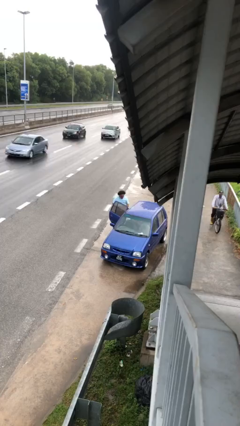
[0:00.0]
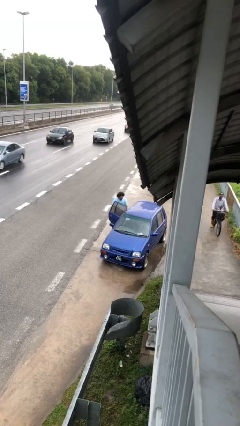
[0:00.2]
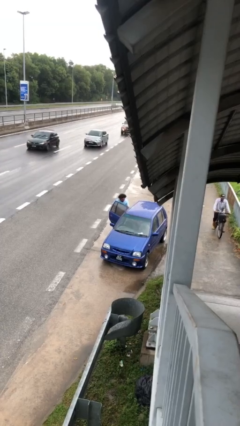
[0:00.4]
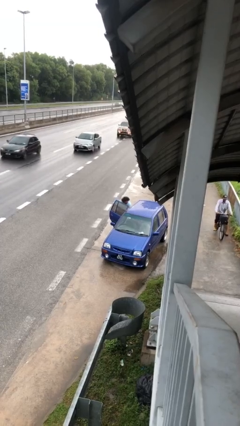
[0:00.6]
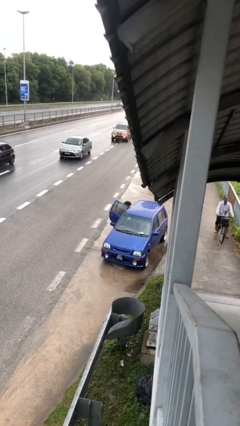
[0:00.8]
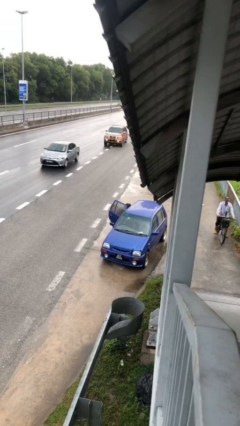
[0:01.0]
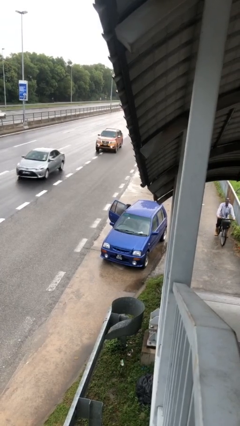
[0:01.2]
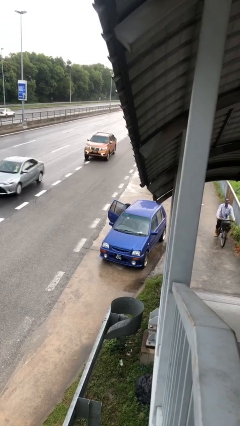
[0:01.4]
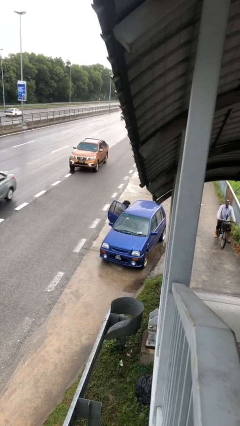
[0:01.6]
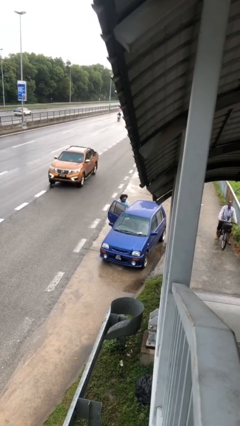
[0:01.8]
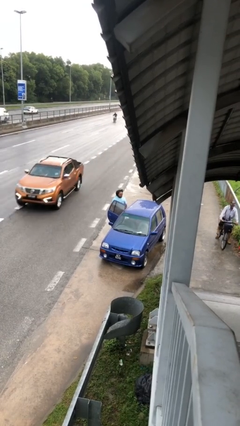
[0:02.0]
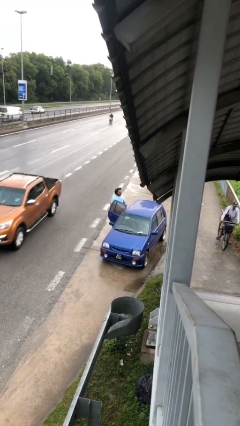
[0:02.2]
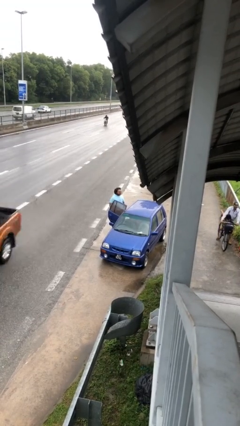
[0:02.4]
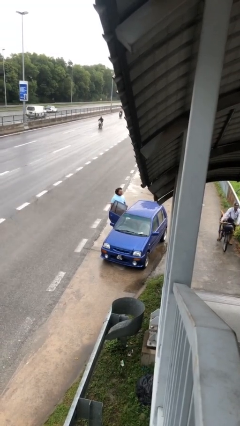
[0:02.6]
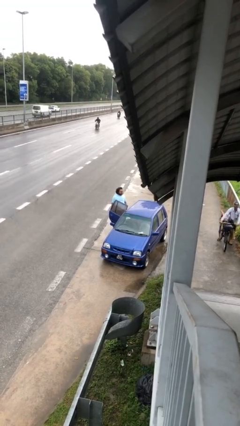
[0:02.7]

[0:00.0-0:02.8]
person loads car

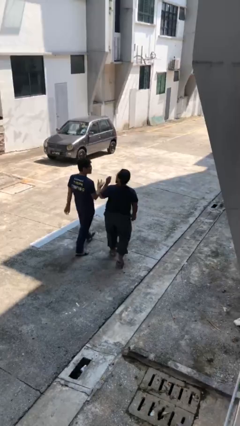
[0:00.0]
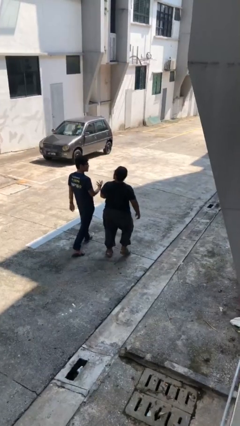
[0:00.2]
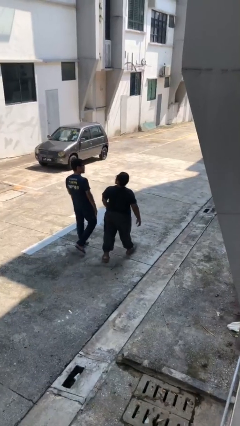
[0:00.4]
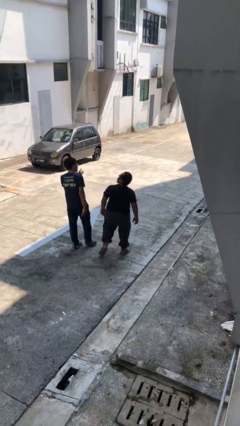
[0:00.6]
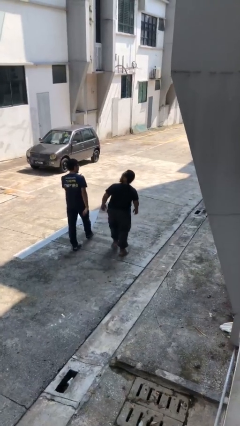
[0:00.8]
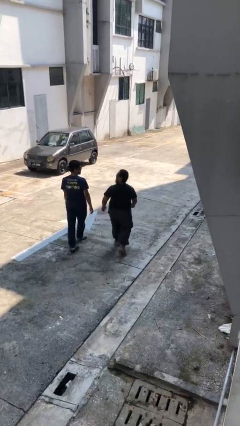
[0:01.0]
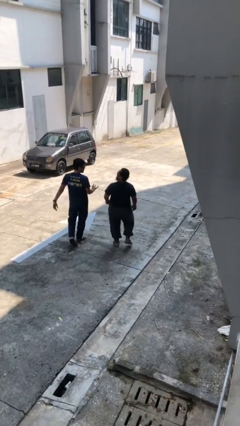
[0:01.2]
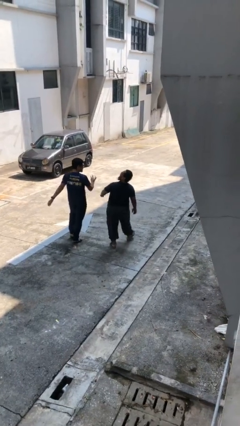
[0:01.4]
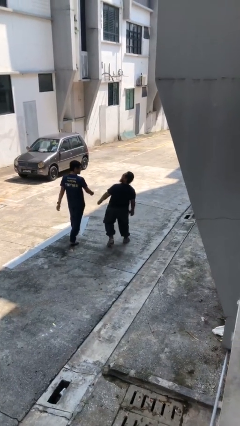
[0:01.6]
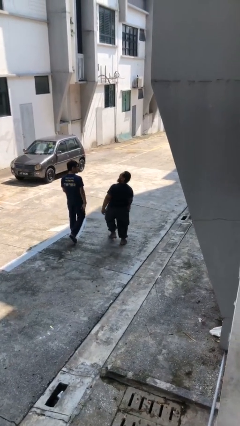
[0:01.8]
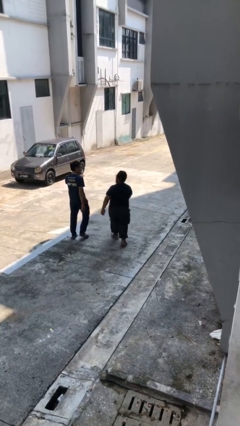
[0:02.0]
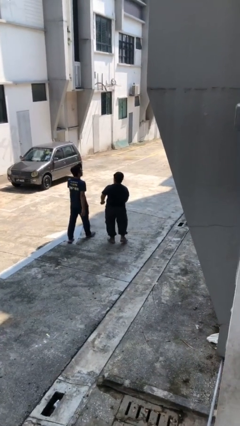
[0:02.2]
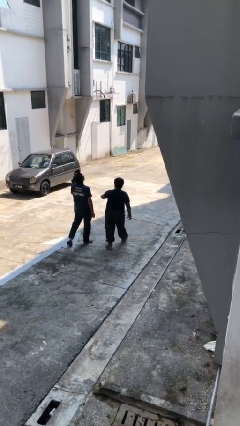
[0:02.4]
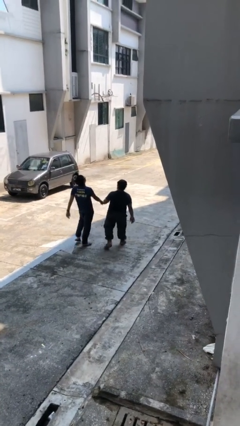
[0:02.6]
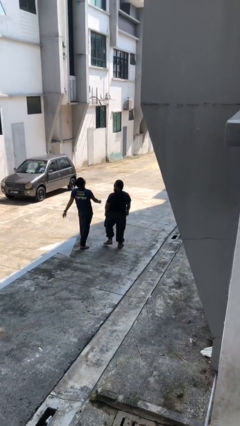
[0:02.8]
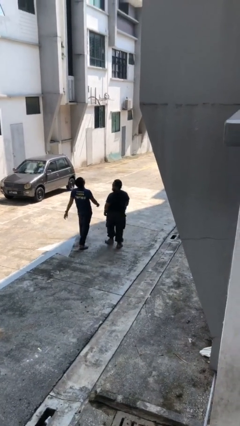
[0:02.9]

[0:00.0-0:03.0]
person talks to person

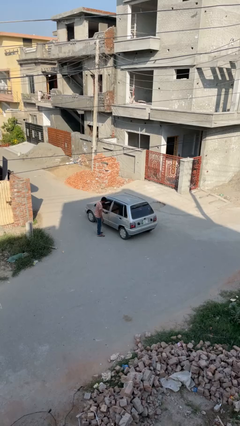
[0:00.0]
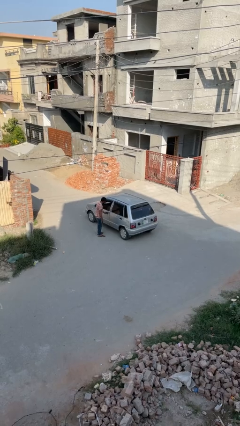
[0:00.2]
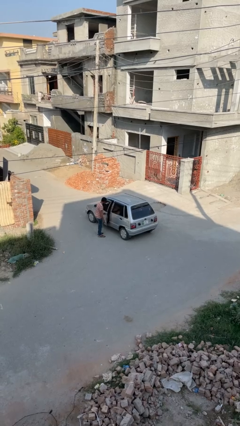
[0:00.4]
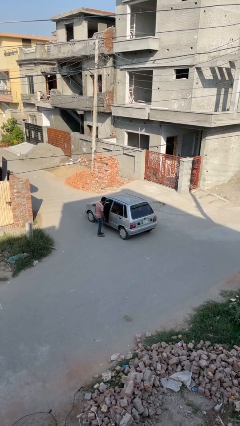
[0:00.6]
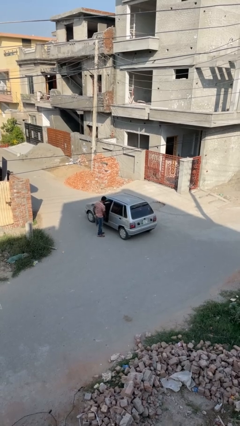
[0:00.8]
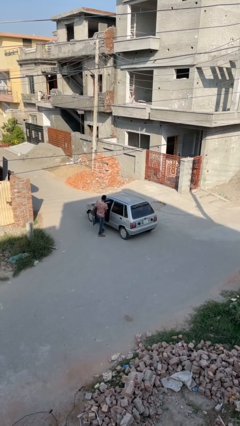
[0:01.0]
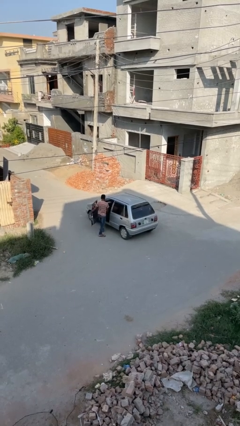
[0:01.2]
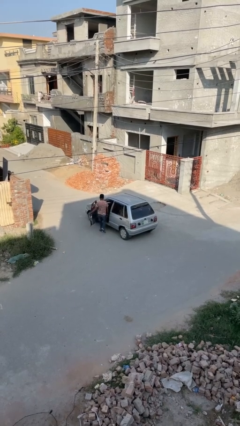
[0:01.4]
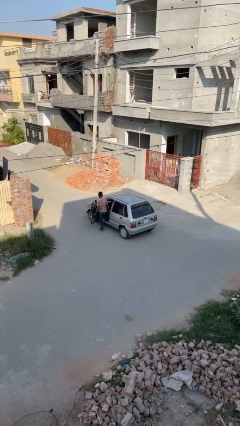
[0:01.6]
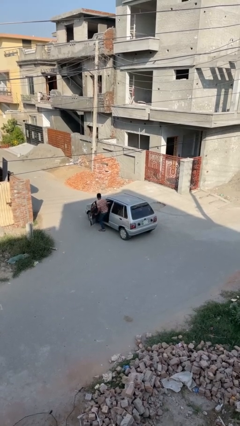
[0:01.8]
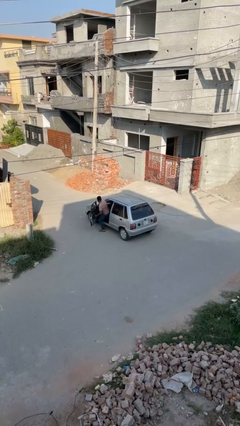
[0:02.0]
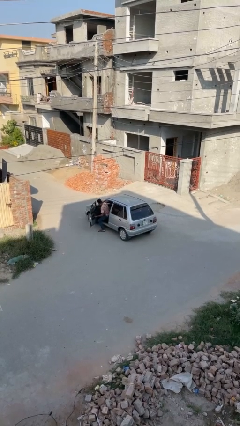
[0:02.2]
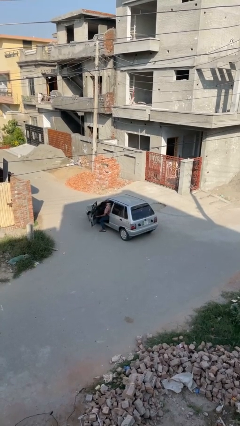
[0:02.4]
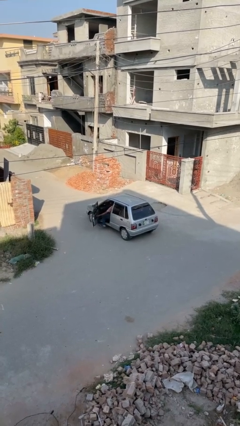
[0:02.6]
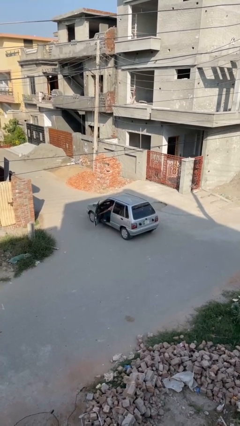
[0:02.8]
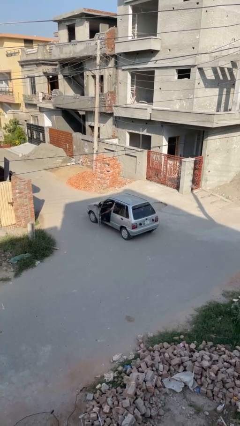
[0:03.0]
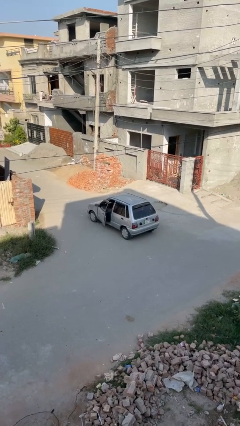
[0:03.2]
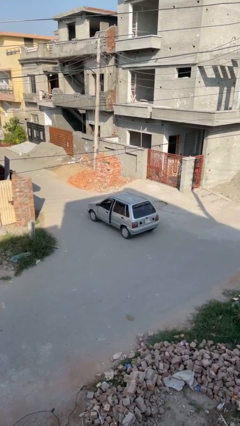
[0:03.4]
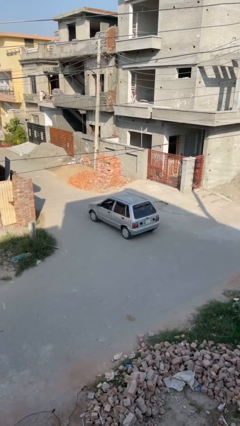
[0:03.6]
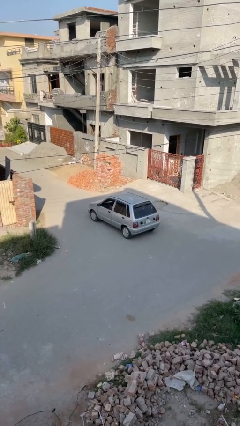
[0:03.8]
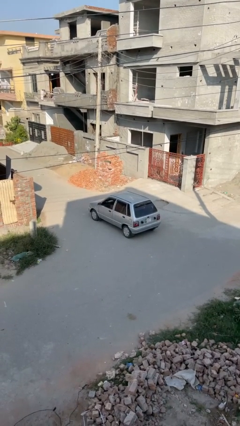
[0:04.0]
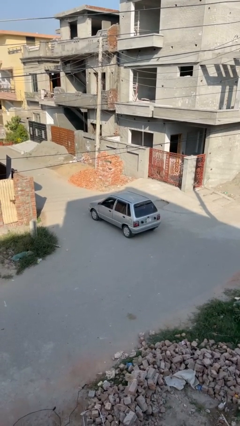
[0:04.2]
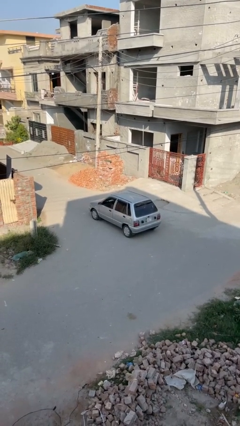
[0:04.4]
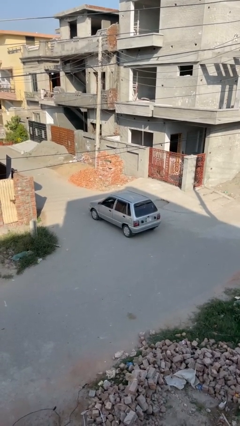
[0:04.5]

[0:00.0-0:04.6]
car picks up person

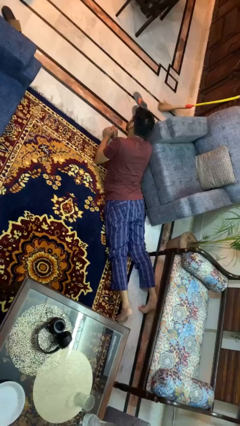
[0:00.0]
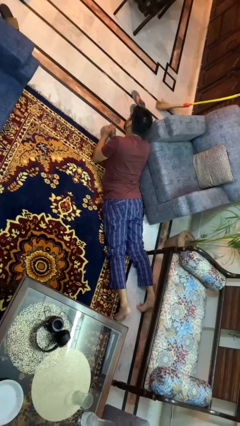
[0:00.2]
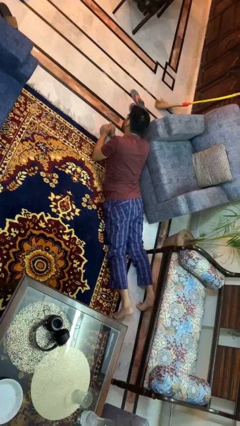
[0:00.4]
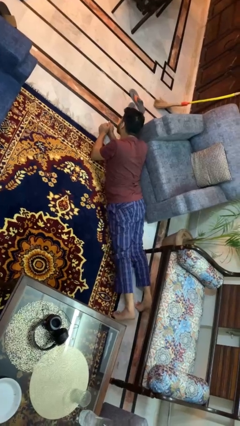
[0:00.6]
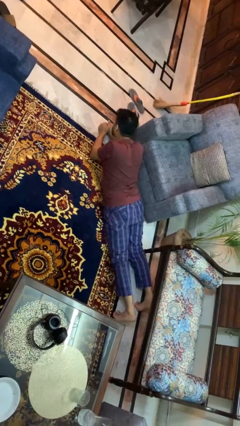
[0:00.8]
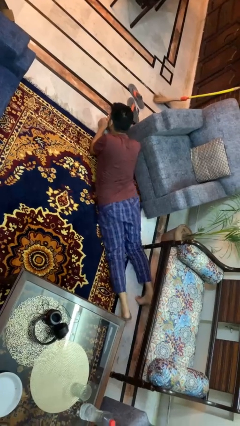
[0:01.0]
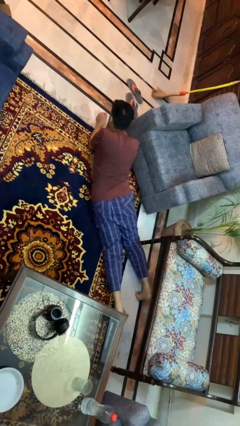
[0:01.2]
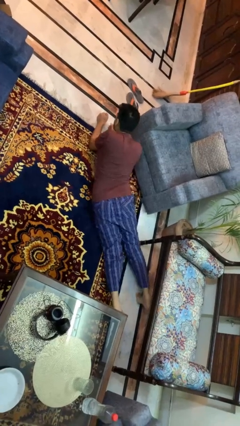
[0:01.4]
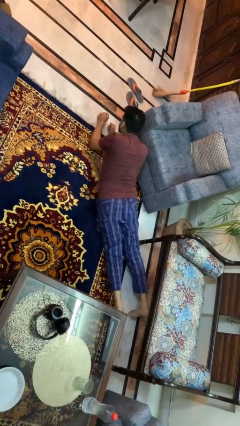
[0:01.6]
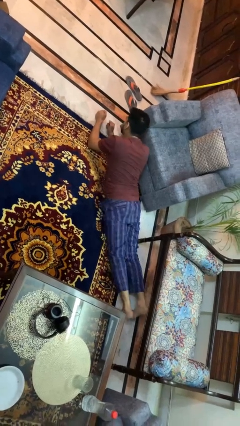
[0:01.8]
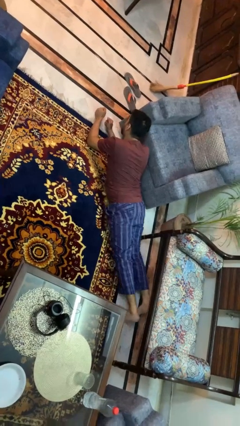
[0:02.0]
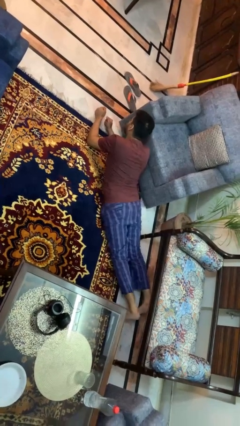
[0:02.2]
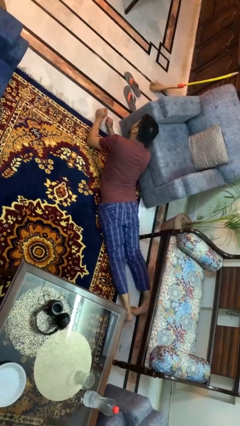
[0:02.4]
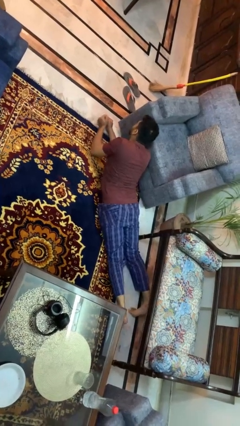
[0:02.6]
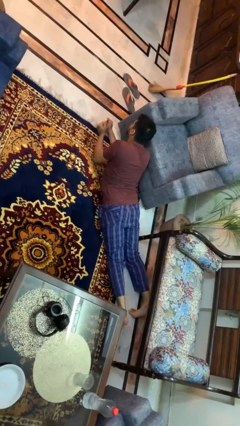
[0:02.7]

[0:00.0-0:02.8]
person crawls

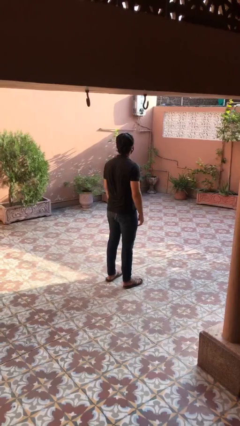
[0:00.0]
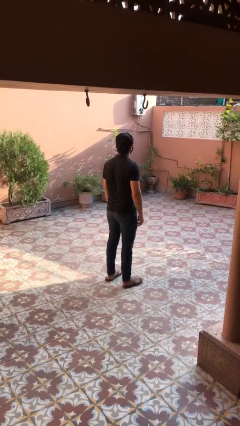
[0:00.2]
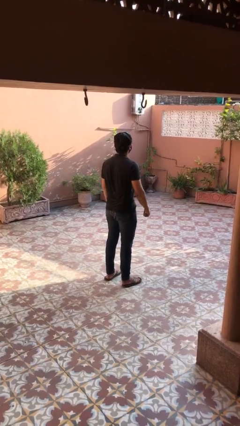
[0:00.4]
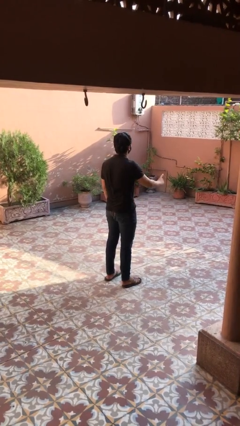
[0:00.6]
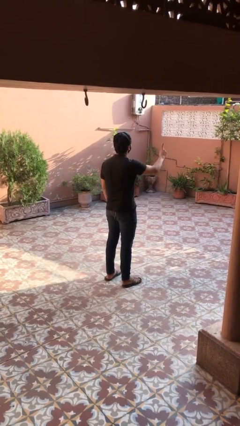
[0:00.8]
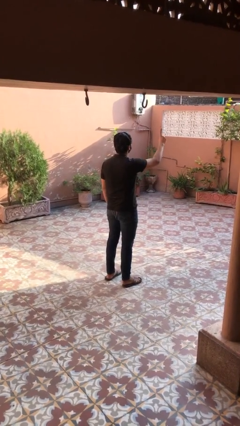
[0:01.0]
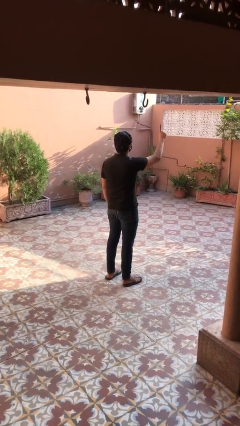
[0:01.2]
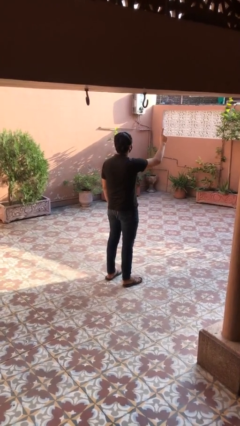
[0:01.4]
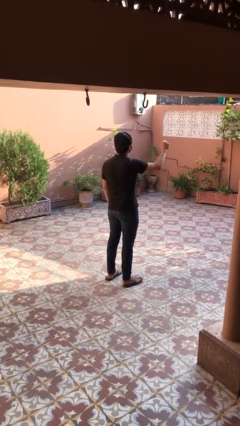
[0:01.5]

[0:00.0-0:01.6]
person gestures number one

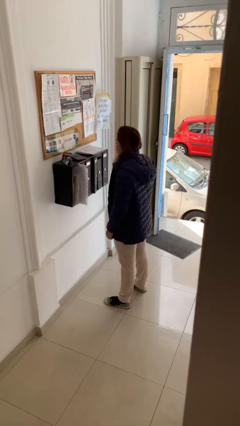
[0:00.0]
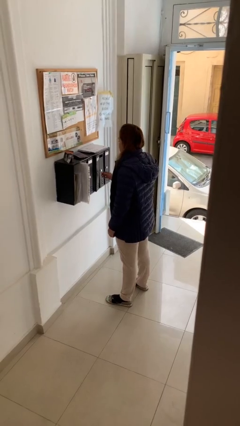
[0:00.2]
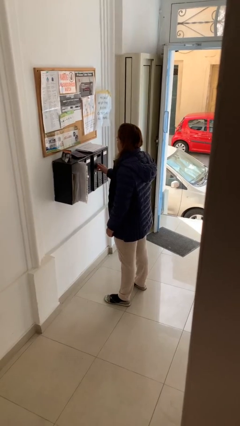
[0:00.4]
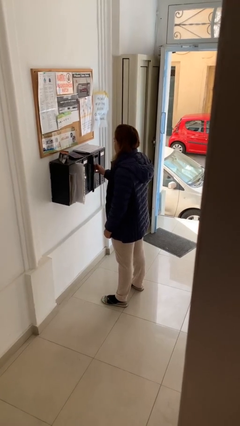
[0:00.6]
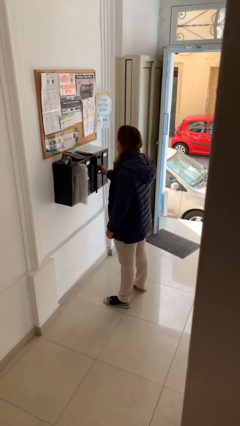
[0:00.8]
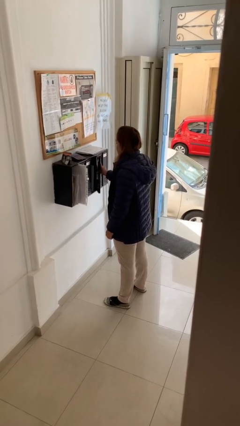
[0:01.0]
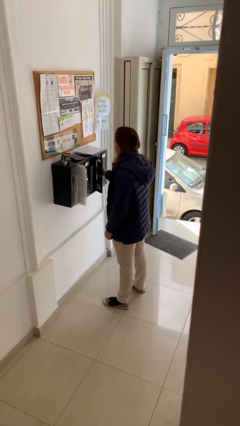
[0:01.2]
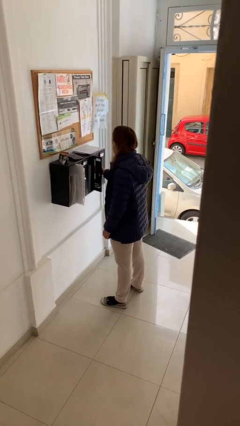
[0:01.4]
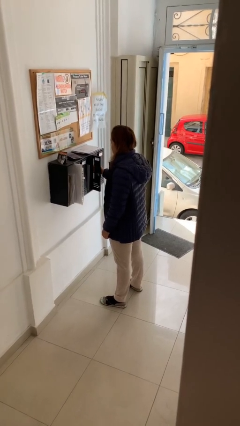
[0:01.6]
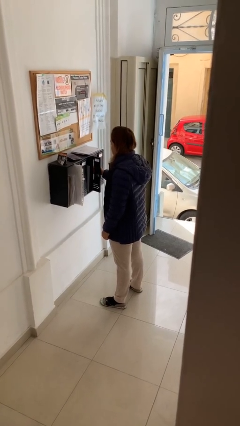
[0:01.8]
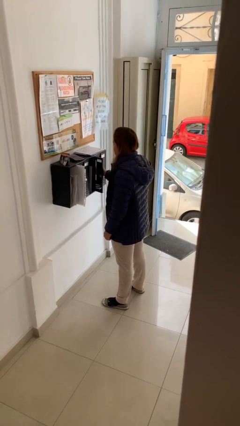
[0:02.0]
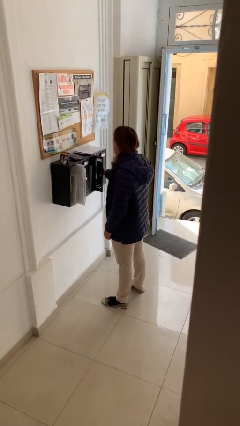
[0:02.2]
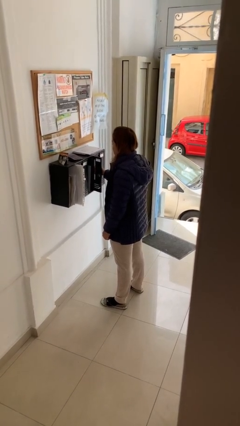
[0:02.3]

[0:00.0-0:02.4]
person opens mailbox
